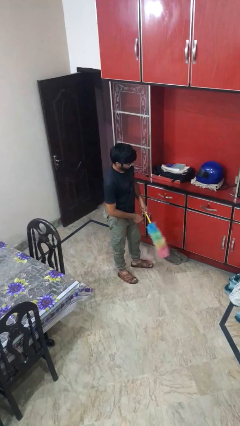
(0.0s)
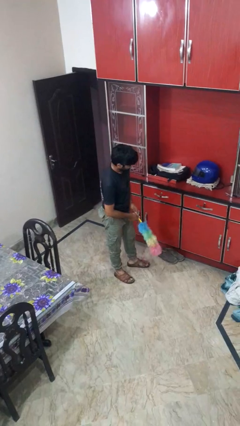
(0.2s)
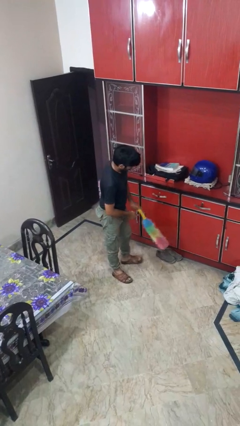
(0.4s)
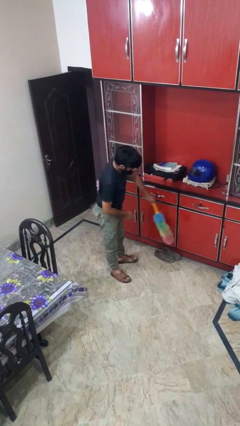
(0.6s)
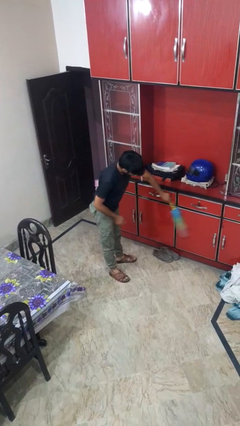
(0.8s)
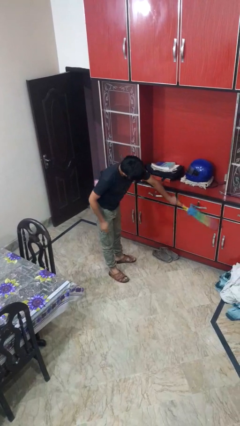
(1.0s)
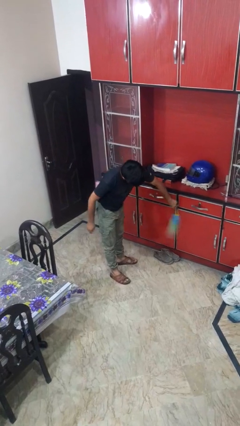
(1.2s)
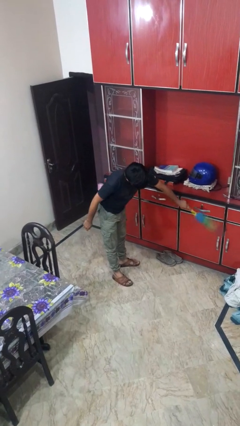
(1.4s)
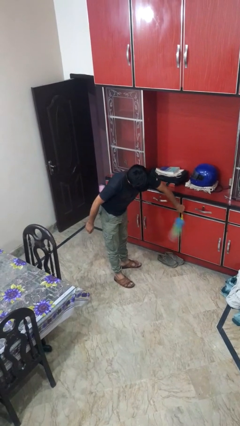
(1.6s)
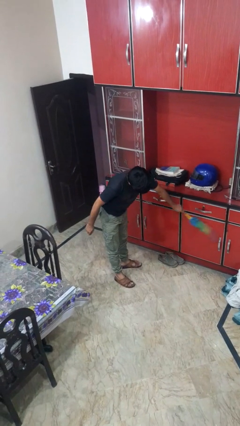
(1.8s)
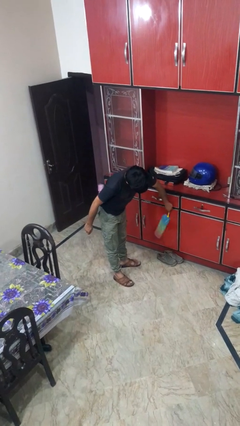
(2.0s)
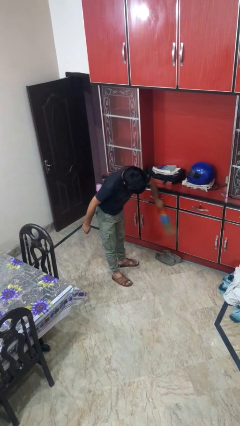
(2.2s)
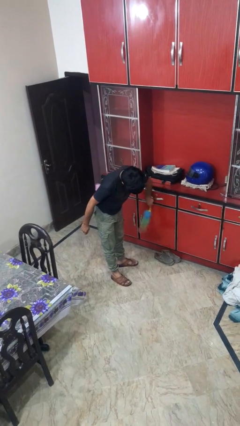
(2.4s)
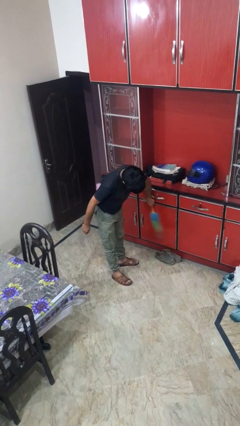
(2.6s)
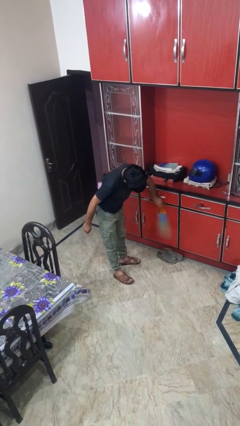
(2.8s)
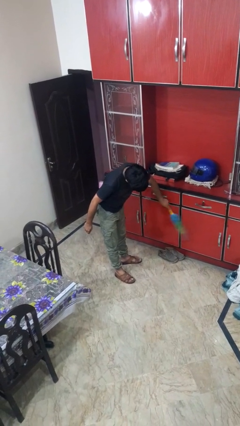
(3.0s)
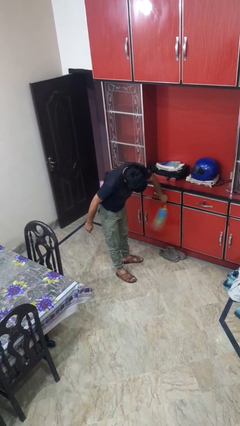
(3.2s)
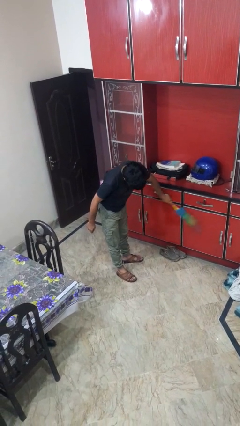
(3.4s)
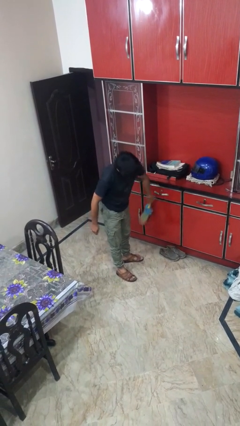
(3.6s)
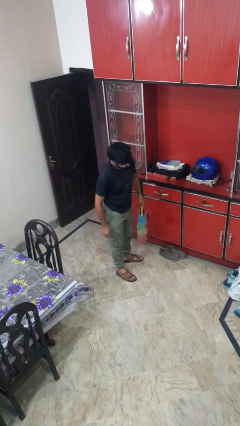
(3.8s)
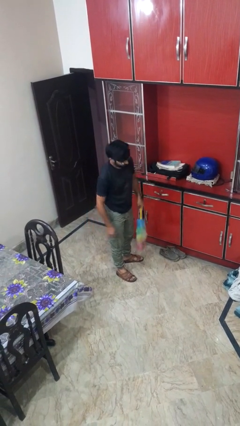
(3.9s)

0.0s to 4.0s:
person dusts furniture

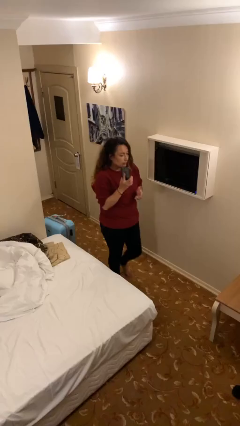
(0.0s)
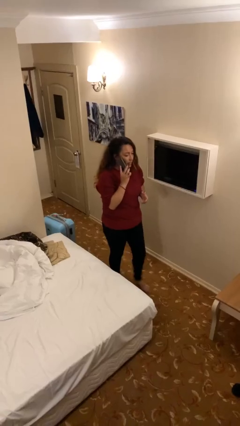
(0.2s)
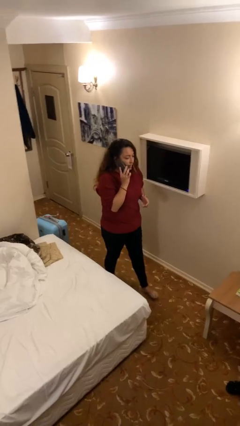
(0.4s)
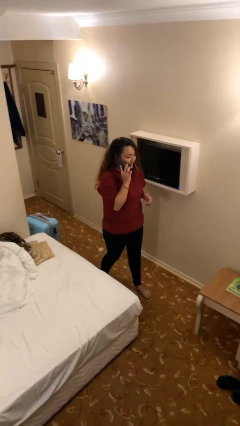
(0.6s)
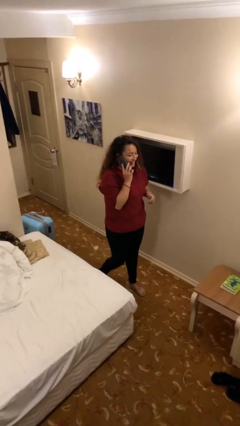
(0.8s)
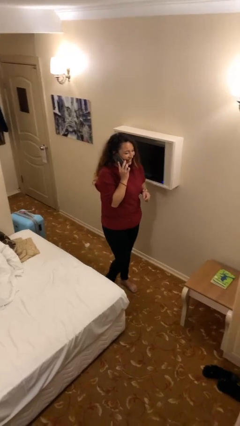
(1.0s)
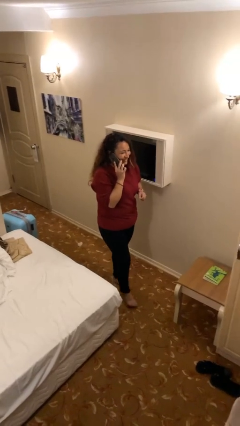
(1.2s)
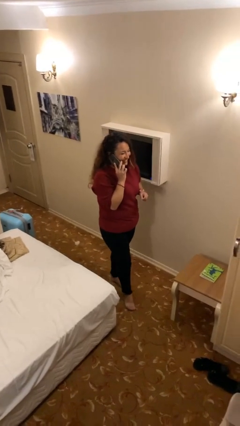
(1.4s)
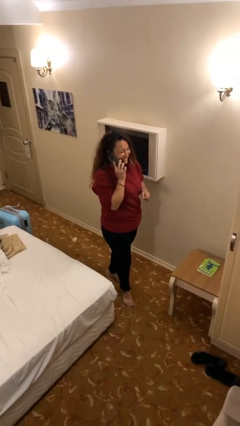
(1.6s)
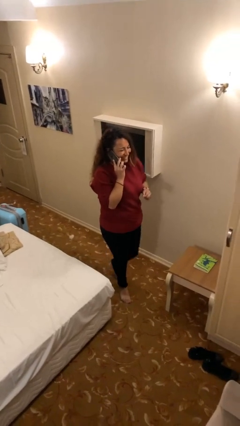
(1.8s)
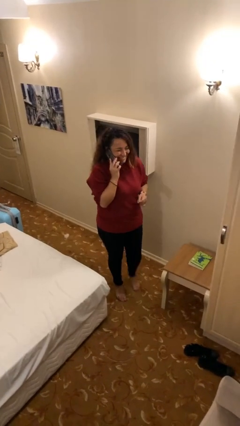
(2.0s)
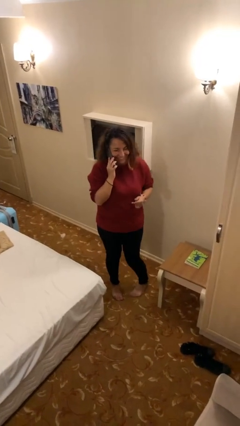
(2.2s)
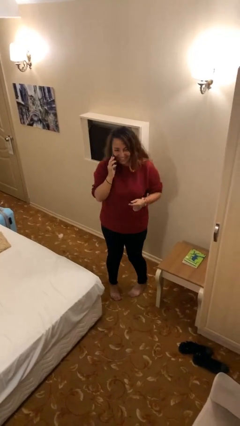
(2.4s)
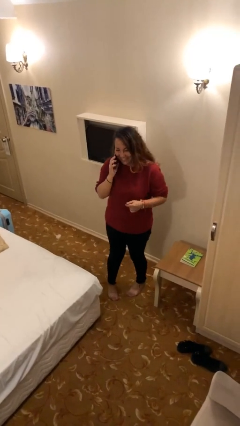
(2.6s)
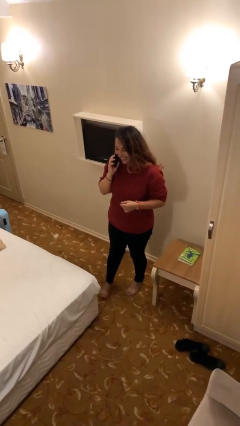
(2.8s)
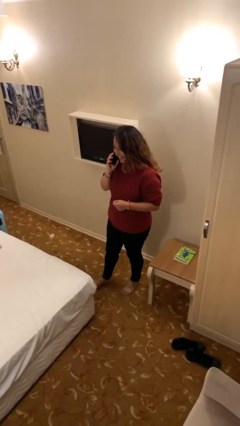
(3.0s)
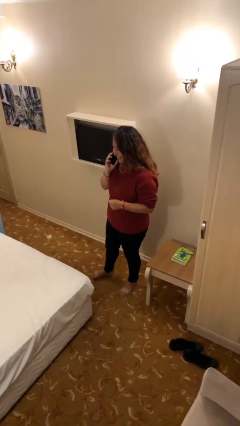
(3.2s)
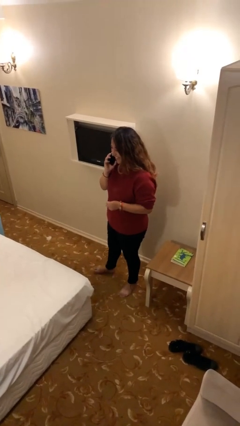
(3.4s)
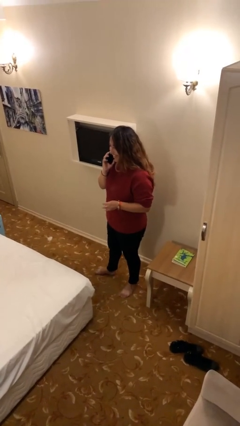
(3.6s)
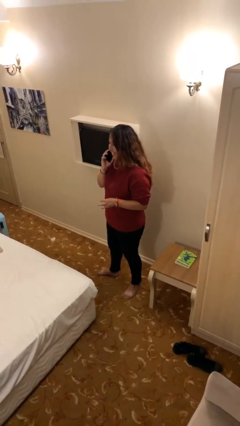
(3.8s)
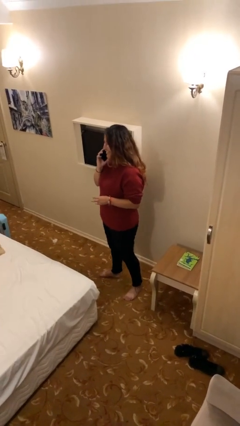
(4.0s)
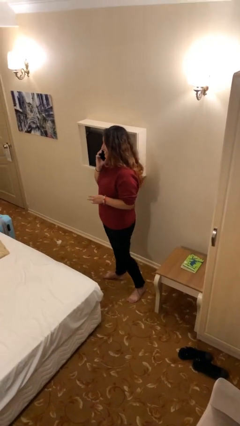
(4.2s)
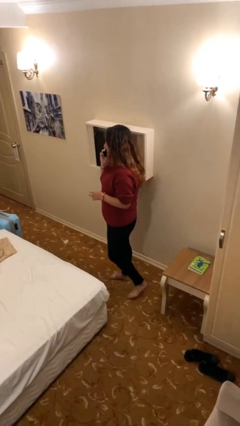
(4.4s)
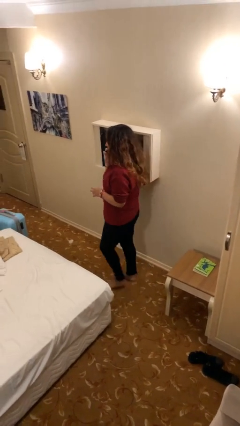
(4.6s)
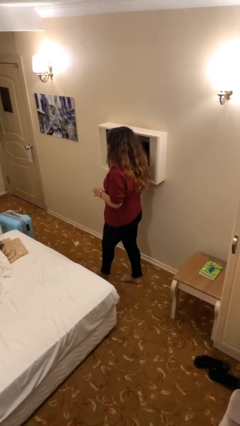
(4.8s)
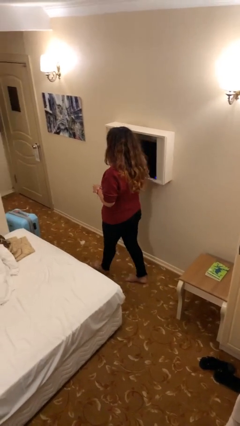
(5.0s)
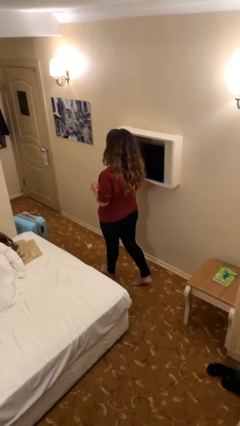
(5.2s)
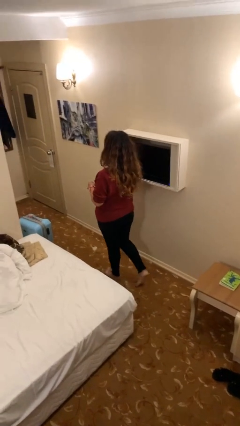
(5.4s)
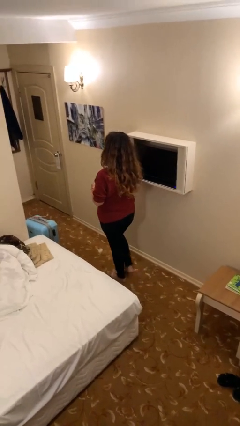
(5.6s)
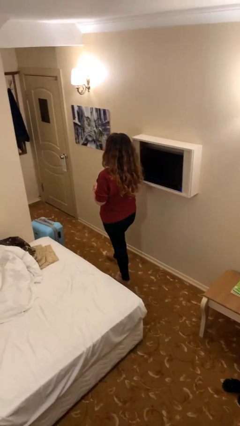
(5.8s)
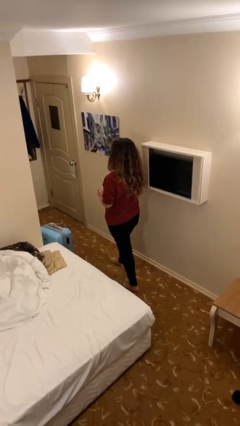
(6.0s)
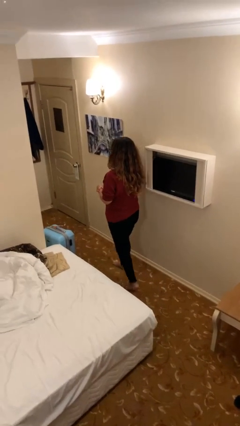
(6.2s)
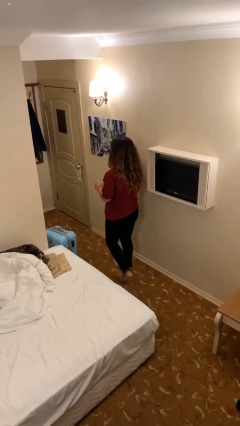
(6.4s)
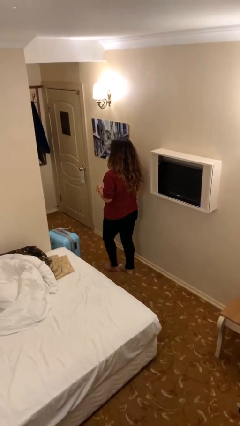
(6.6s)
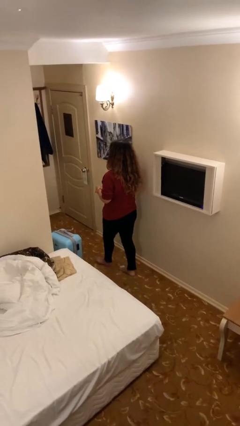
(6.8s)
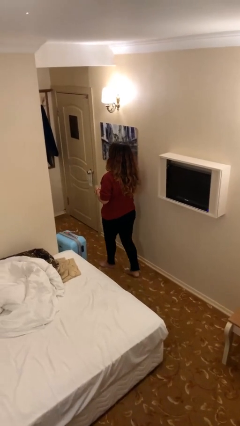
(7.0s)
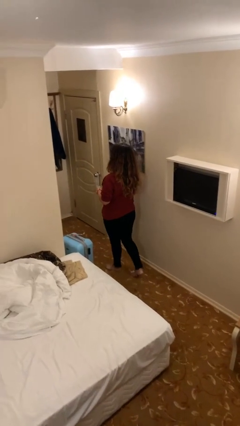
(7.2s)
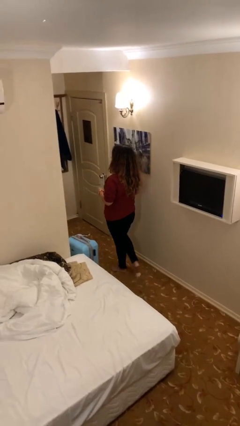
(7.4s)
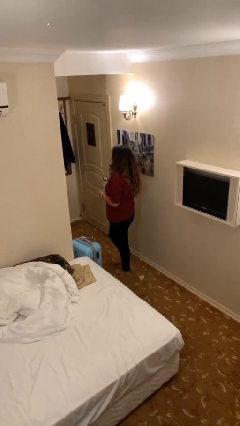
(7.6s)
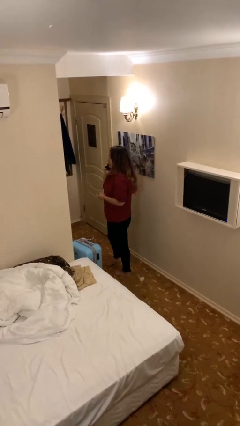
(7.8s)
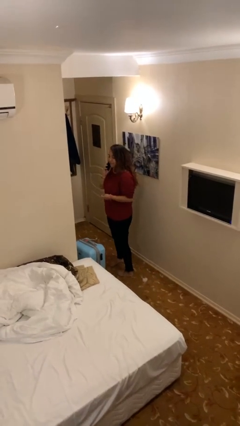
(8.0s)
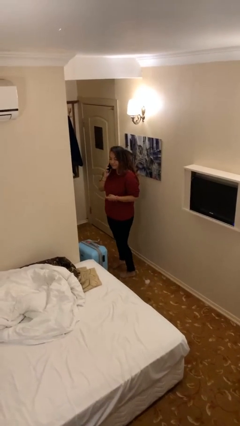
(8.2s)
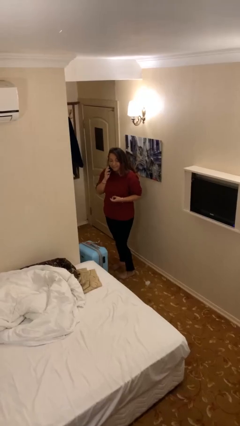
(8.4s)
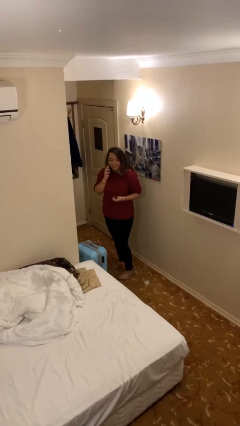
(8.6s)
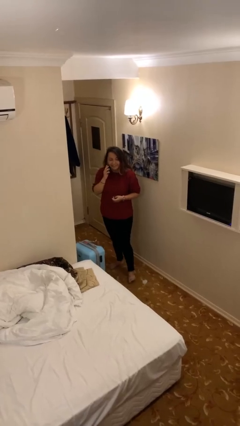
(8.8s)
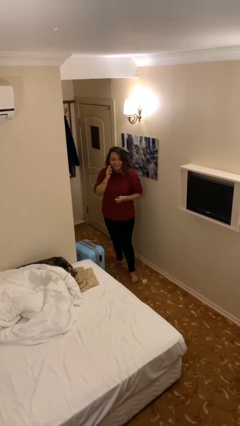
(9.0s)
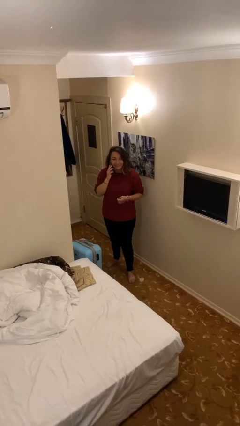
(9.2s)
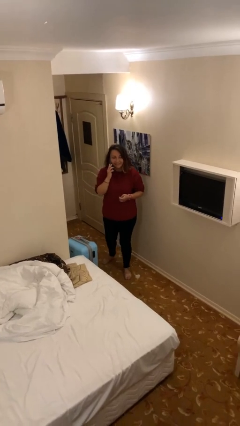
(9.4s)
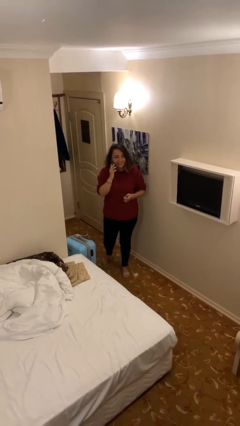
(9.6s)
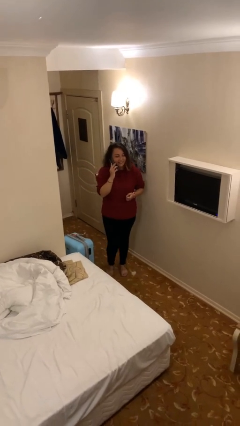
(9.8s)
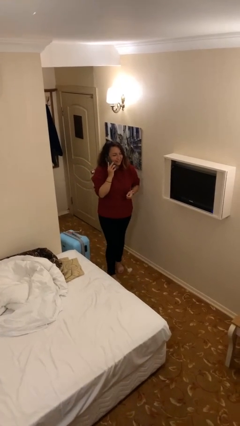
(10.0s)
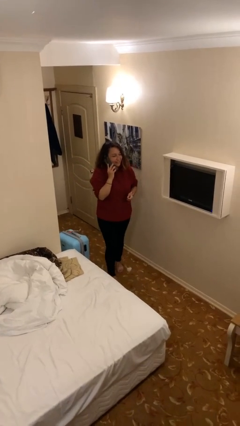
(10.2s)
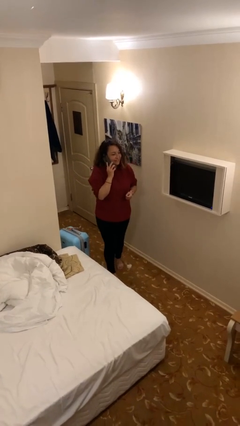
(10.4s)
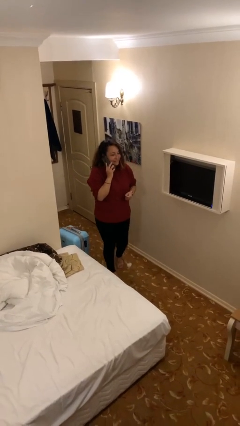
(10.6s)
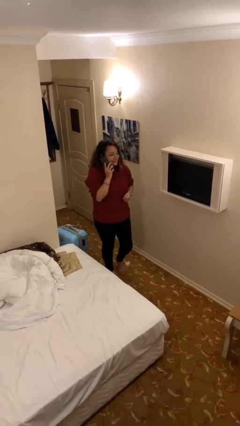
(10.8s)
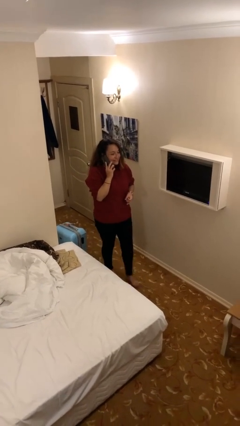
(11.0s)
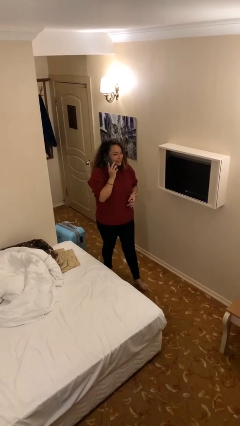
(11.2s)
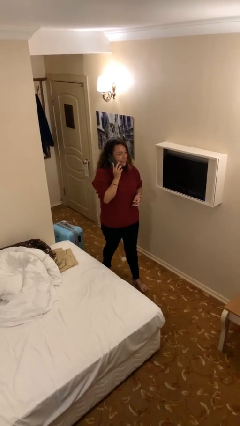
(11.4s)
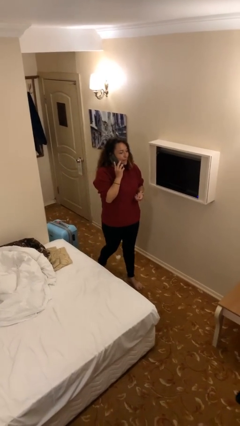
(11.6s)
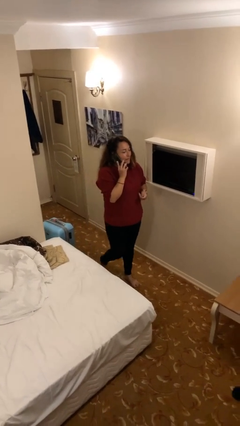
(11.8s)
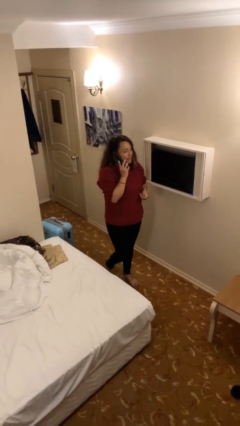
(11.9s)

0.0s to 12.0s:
person talks on phone

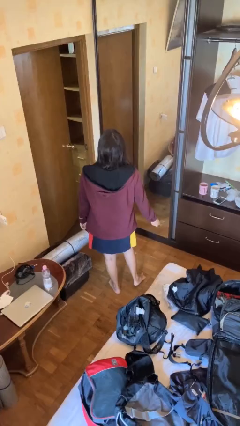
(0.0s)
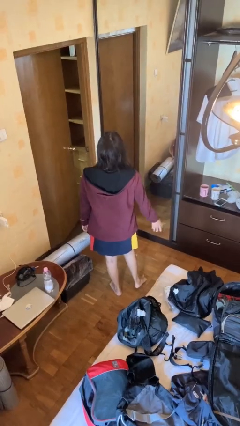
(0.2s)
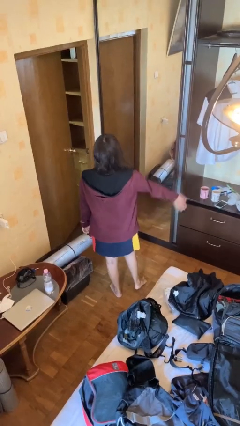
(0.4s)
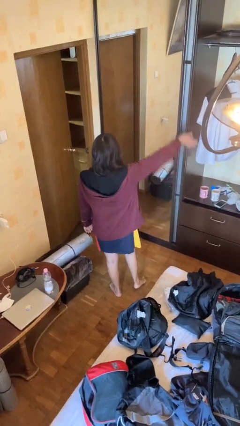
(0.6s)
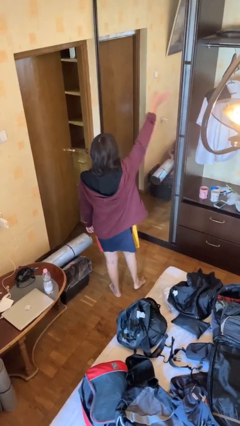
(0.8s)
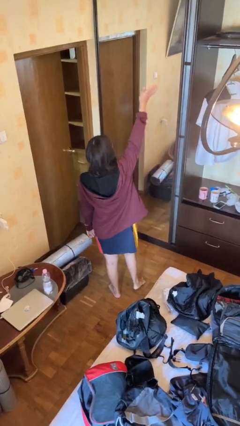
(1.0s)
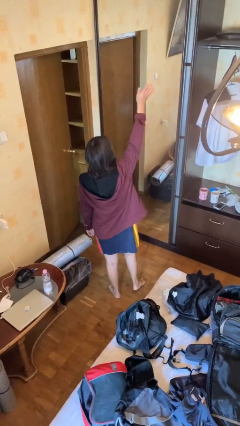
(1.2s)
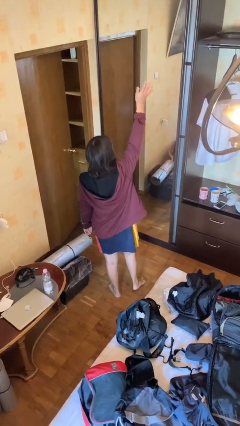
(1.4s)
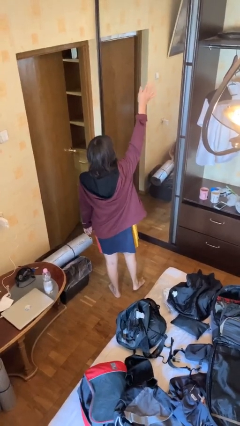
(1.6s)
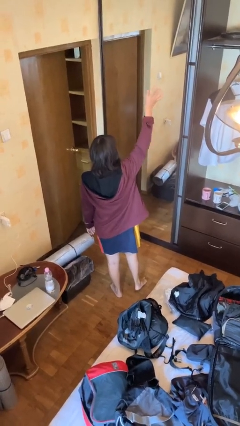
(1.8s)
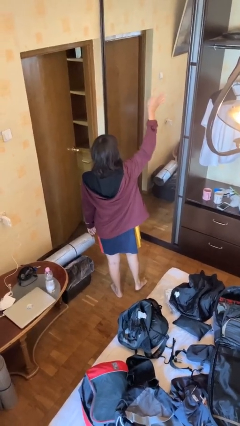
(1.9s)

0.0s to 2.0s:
person gestures swipe up

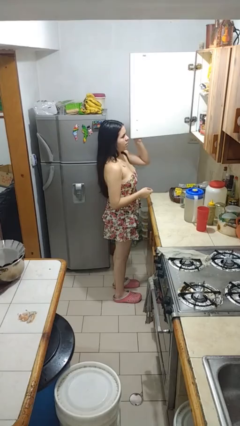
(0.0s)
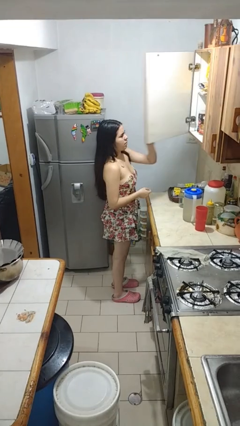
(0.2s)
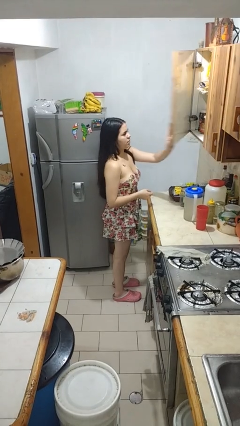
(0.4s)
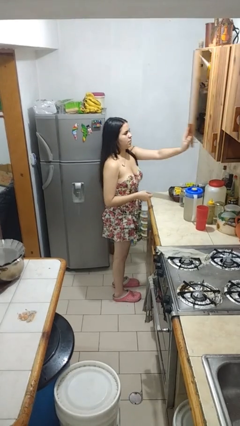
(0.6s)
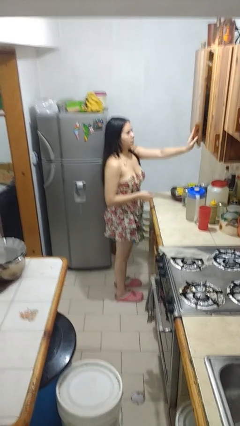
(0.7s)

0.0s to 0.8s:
person closes cabinet
